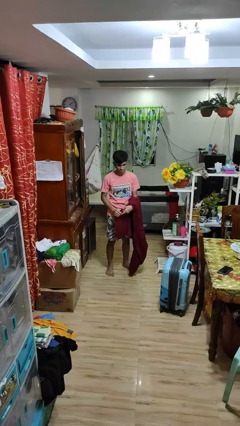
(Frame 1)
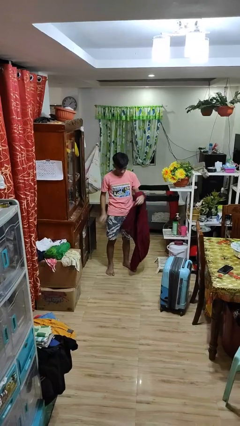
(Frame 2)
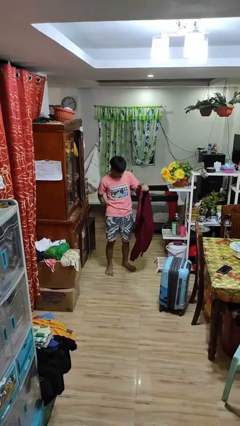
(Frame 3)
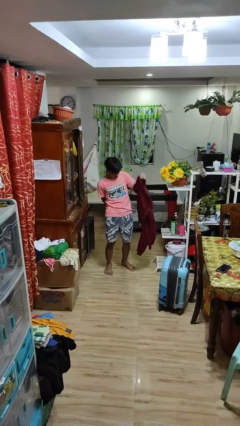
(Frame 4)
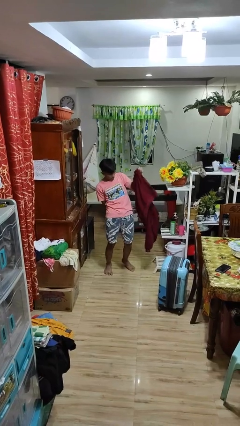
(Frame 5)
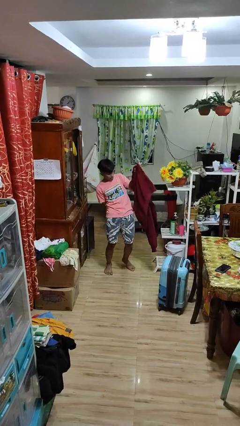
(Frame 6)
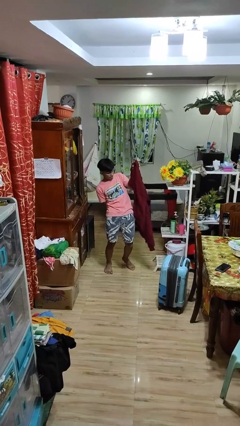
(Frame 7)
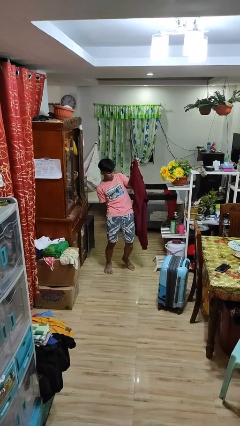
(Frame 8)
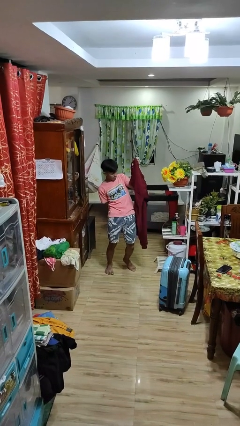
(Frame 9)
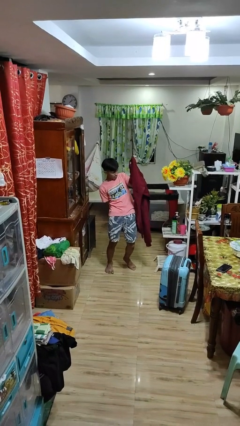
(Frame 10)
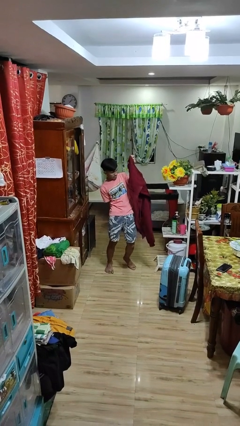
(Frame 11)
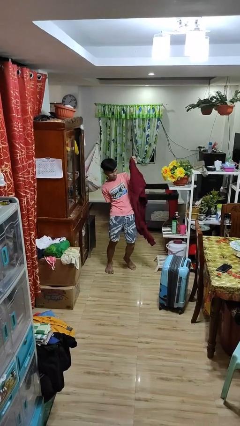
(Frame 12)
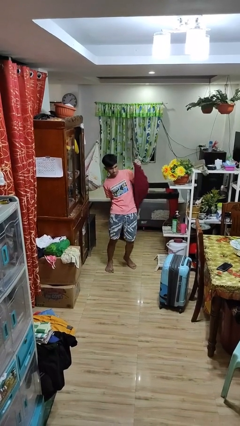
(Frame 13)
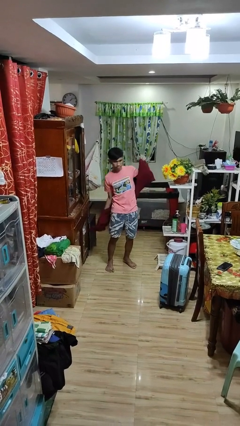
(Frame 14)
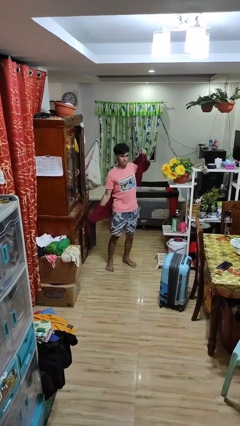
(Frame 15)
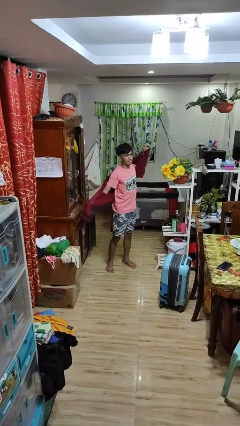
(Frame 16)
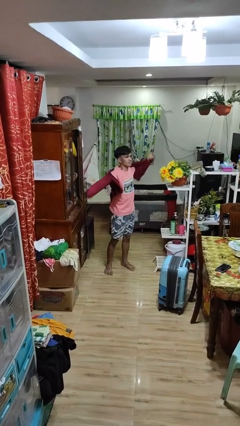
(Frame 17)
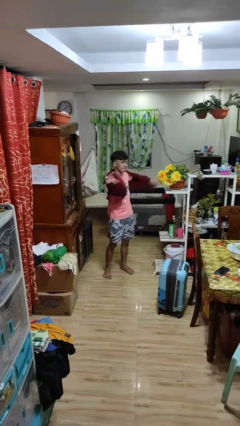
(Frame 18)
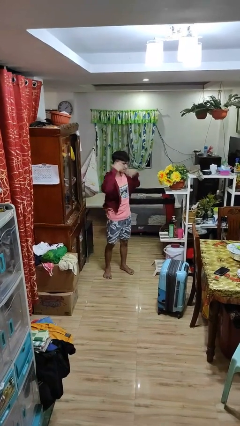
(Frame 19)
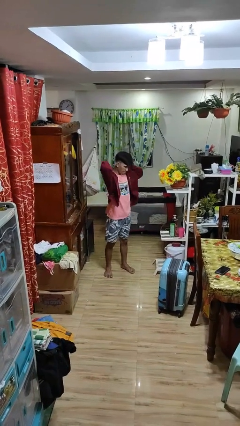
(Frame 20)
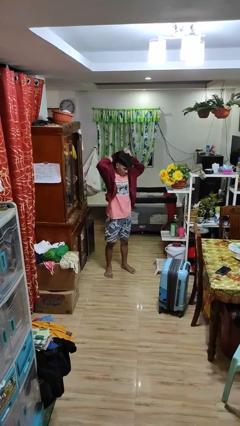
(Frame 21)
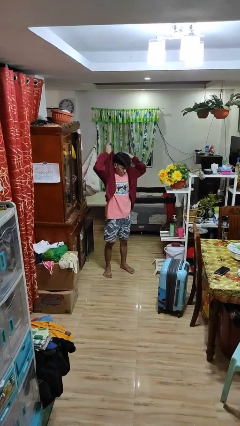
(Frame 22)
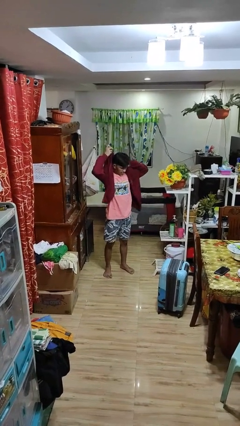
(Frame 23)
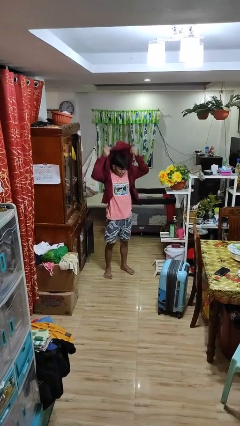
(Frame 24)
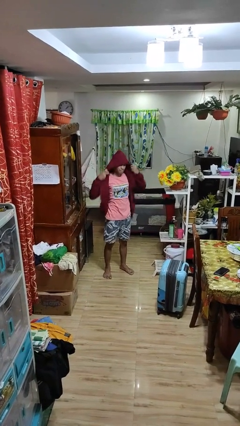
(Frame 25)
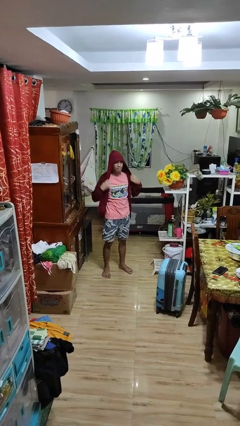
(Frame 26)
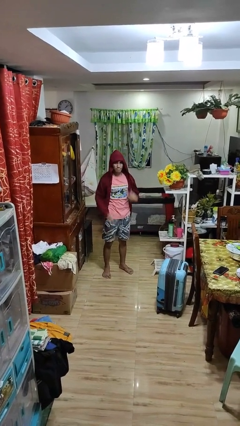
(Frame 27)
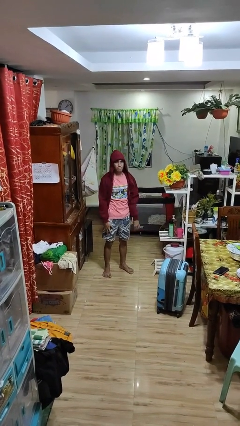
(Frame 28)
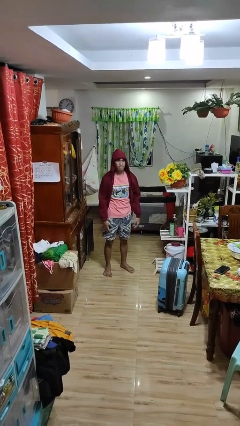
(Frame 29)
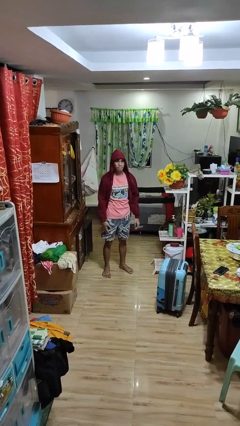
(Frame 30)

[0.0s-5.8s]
person puts on hoodie

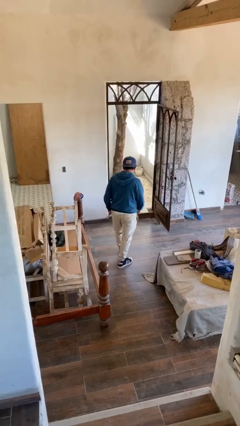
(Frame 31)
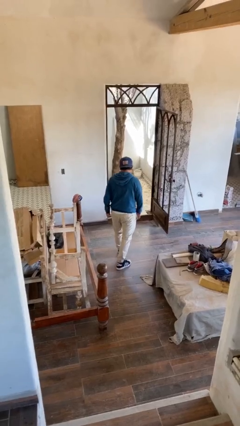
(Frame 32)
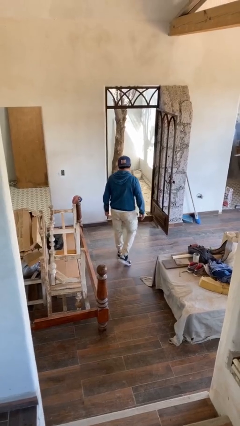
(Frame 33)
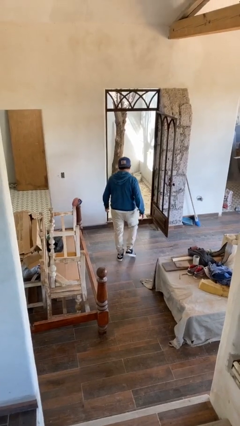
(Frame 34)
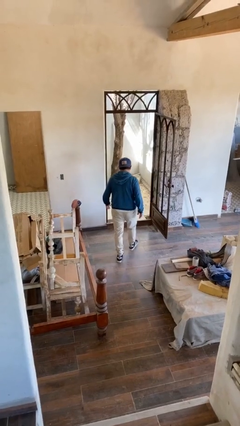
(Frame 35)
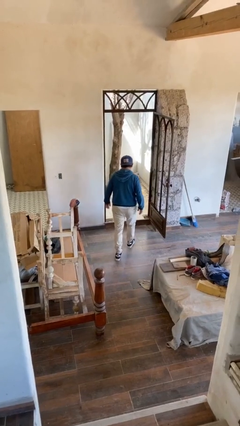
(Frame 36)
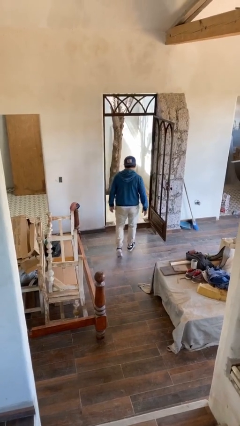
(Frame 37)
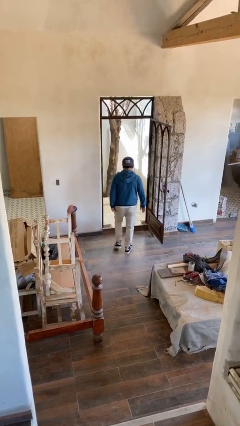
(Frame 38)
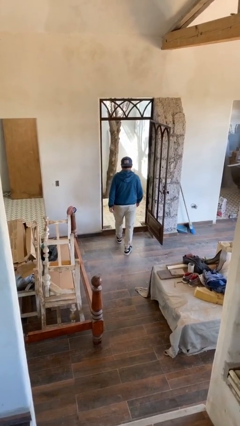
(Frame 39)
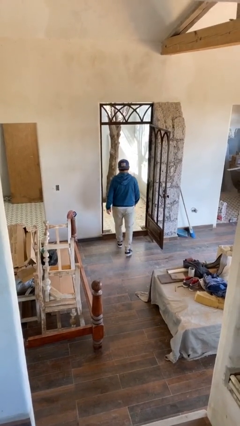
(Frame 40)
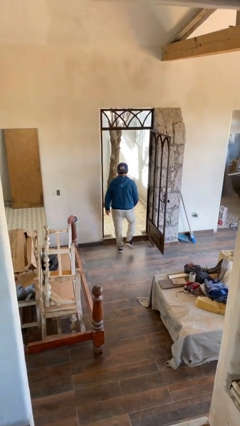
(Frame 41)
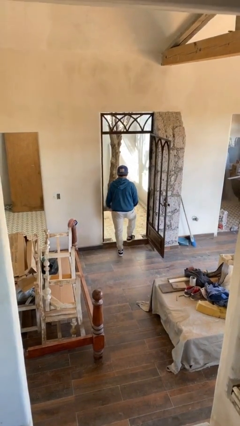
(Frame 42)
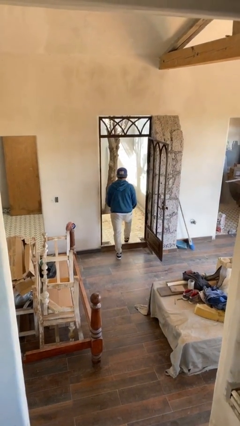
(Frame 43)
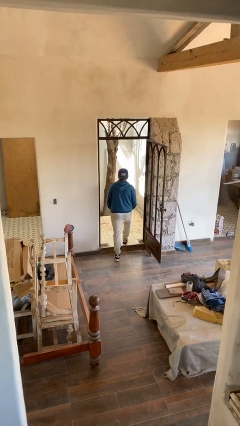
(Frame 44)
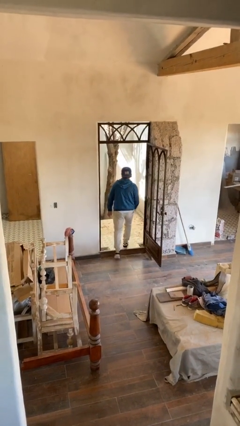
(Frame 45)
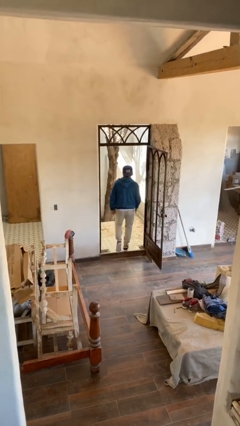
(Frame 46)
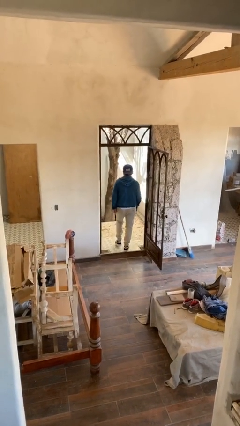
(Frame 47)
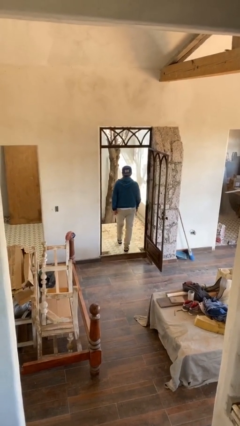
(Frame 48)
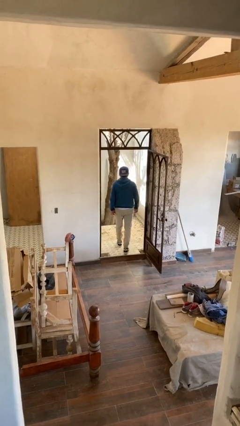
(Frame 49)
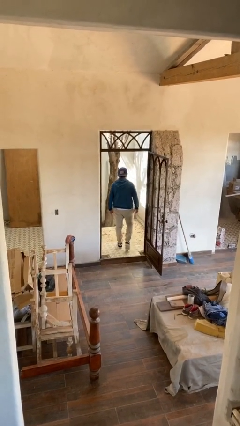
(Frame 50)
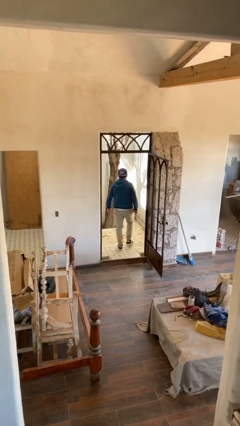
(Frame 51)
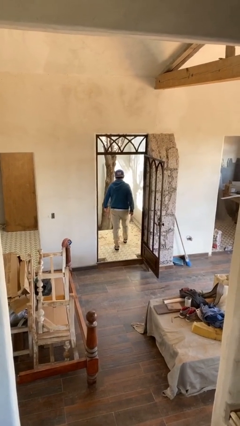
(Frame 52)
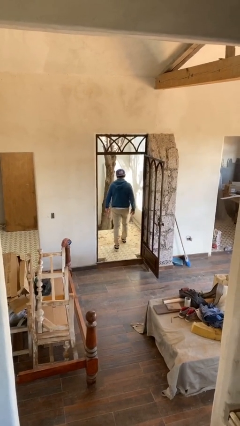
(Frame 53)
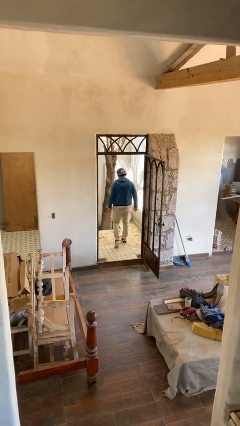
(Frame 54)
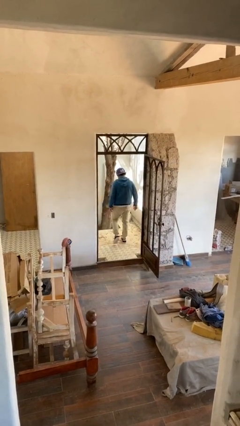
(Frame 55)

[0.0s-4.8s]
person exits scene through structure

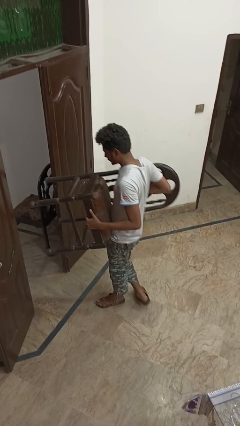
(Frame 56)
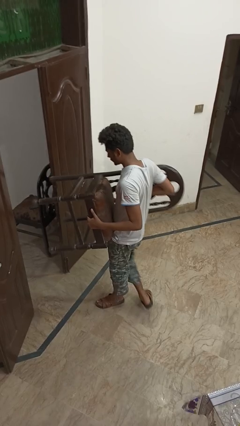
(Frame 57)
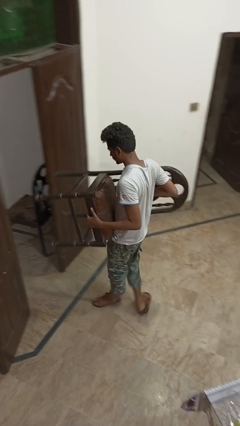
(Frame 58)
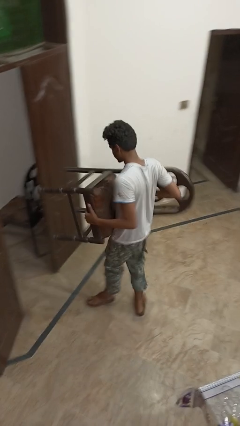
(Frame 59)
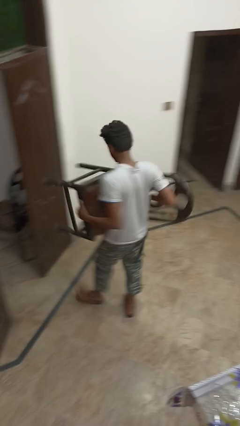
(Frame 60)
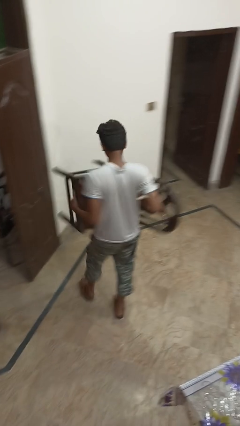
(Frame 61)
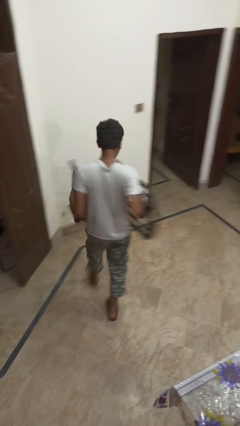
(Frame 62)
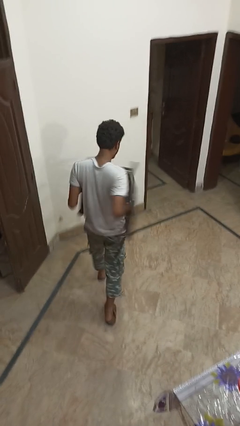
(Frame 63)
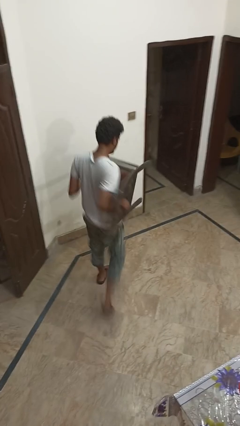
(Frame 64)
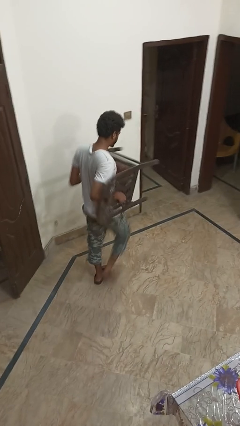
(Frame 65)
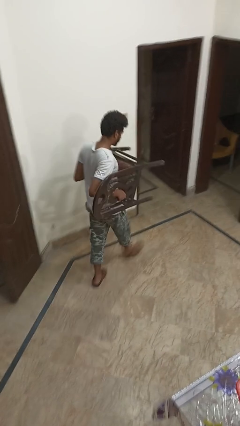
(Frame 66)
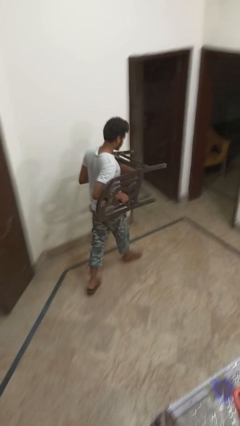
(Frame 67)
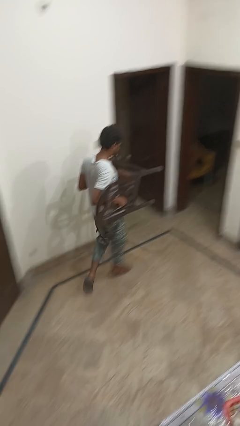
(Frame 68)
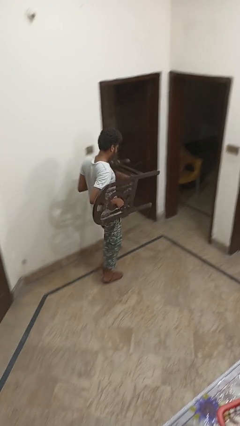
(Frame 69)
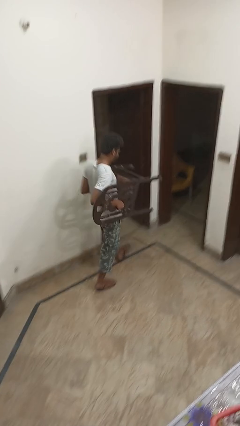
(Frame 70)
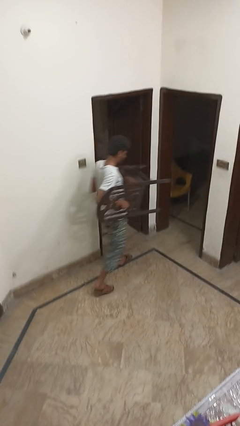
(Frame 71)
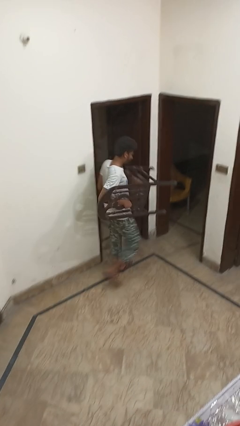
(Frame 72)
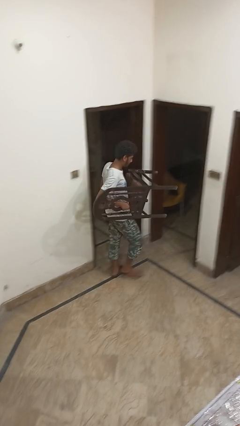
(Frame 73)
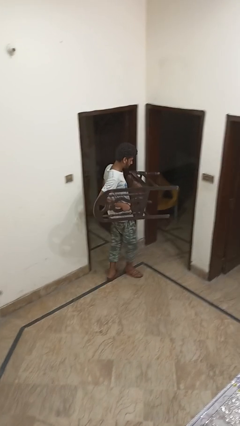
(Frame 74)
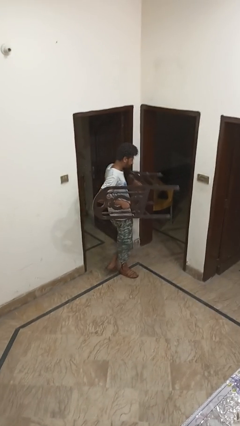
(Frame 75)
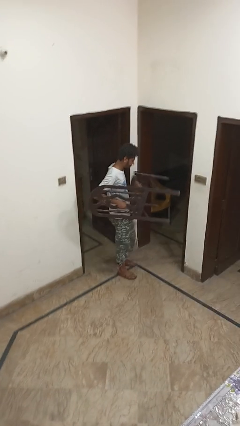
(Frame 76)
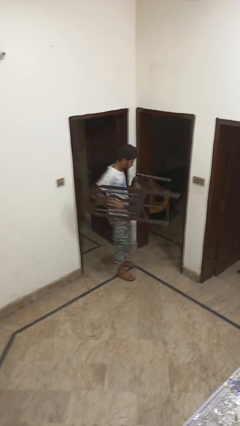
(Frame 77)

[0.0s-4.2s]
person carries furniture

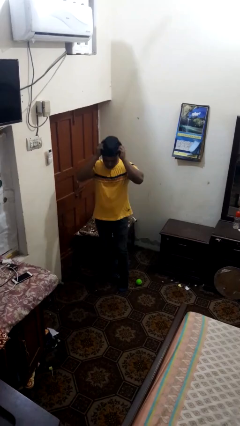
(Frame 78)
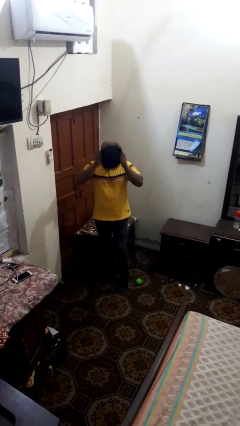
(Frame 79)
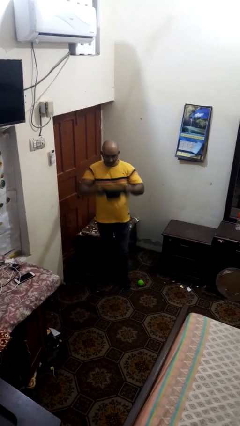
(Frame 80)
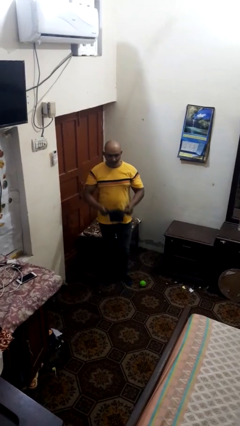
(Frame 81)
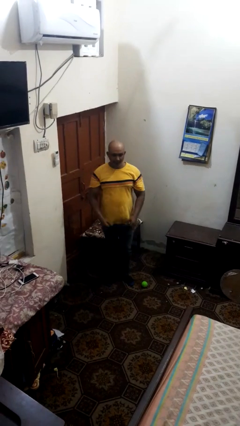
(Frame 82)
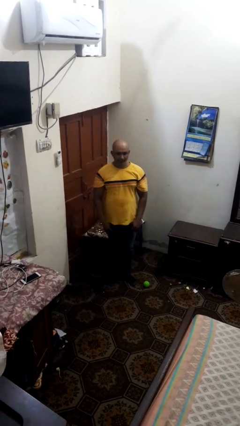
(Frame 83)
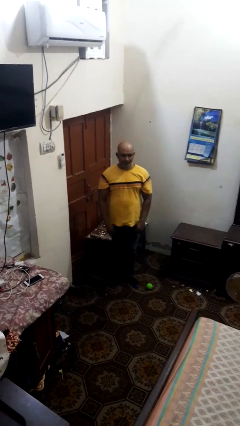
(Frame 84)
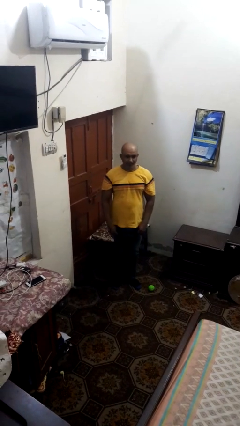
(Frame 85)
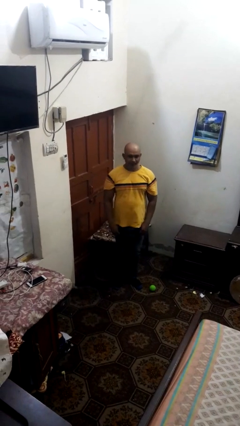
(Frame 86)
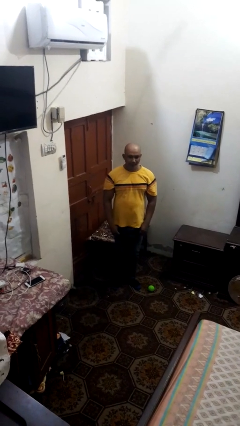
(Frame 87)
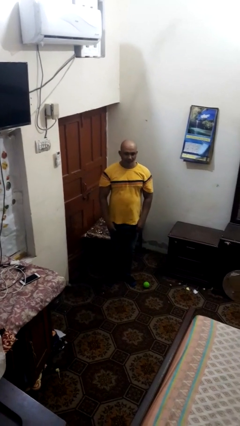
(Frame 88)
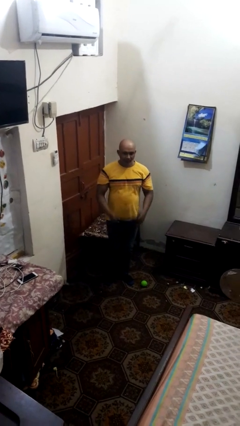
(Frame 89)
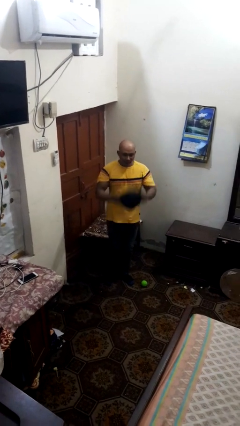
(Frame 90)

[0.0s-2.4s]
person takes off hat
